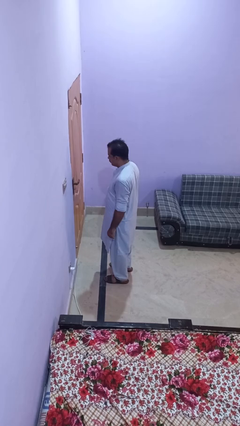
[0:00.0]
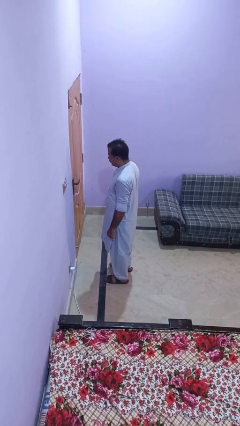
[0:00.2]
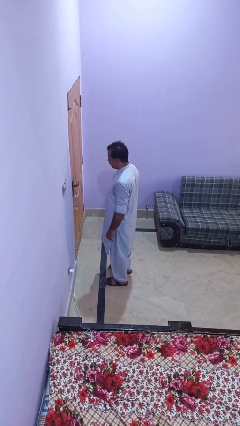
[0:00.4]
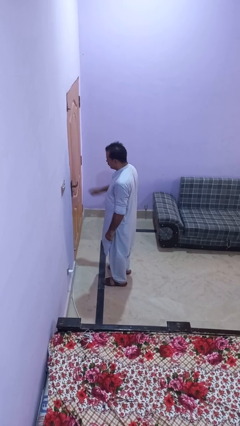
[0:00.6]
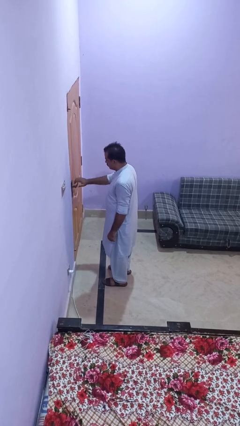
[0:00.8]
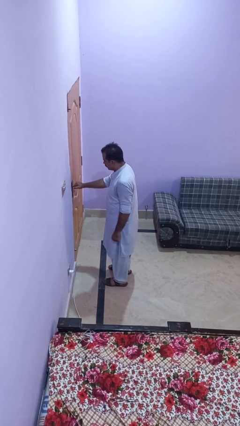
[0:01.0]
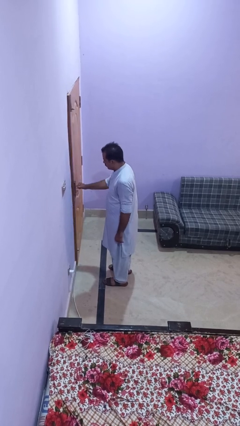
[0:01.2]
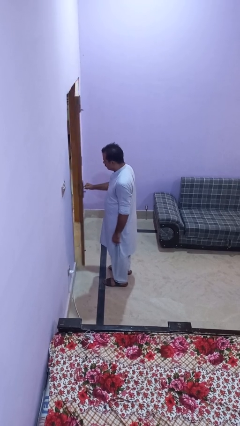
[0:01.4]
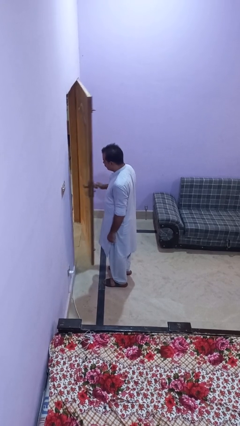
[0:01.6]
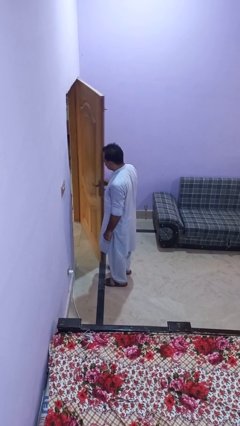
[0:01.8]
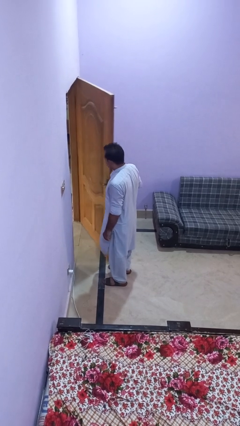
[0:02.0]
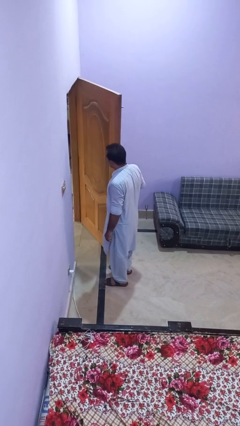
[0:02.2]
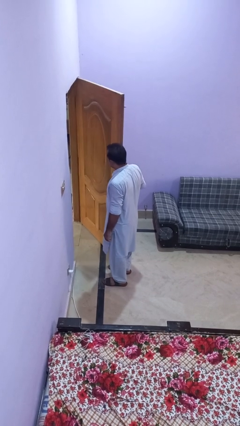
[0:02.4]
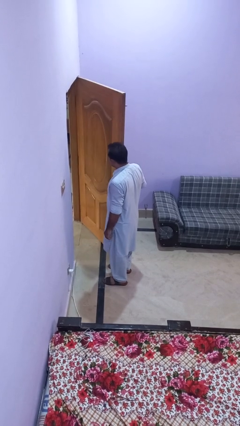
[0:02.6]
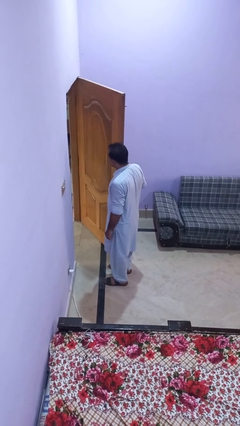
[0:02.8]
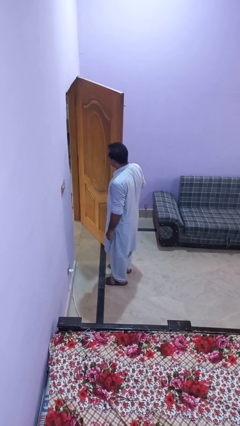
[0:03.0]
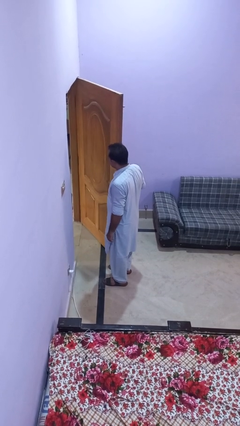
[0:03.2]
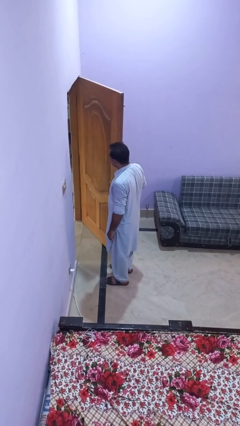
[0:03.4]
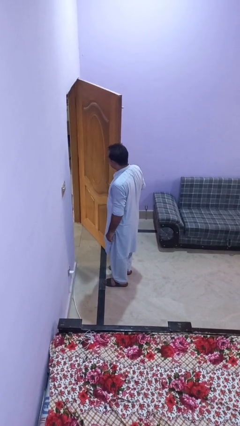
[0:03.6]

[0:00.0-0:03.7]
person opens facility door

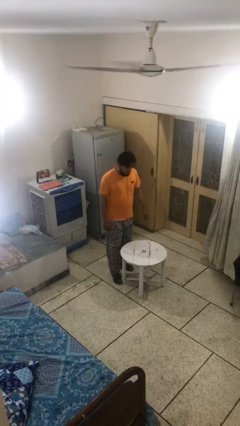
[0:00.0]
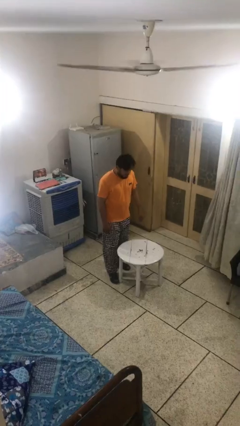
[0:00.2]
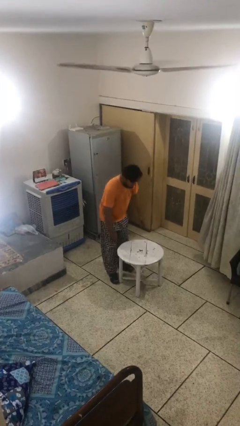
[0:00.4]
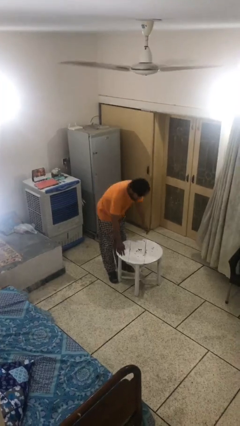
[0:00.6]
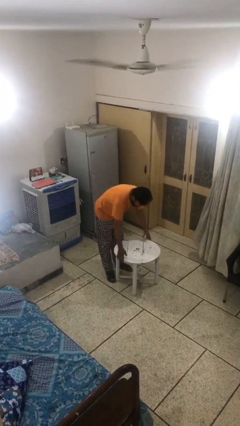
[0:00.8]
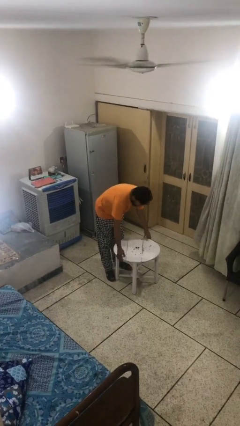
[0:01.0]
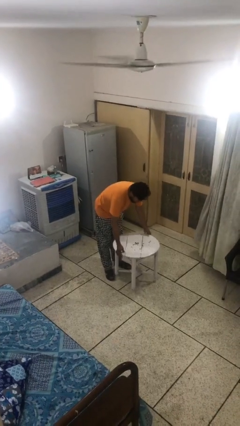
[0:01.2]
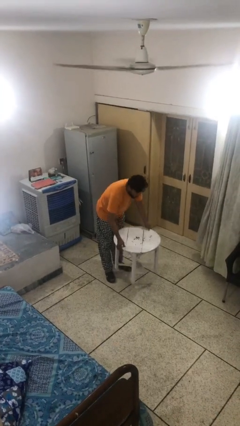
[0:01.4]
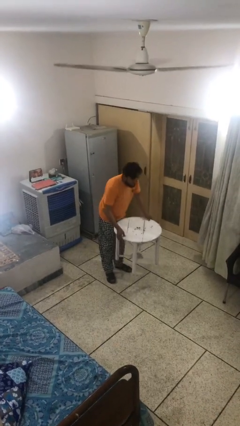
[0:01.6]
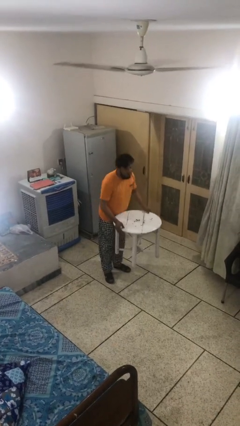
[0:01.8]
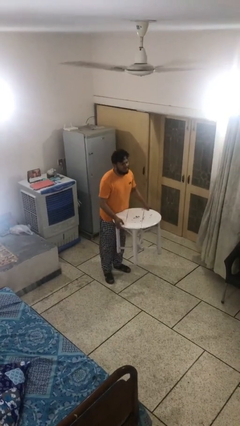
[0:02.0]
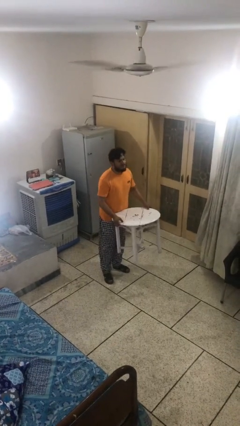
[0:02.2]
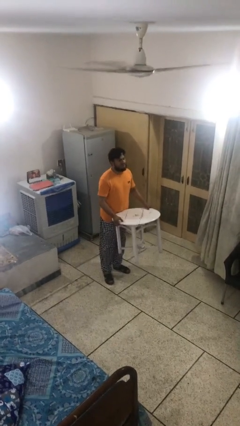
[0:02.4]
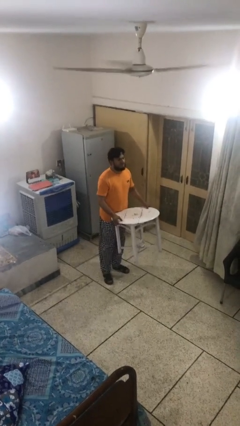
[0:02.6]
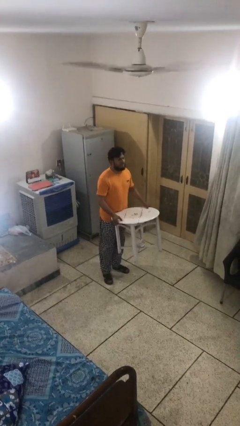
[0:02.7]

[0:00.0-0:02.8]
person picks up object from floor

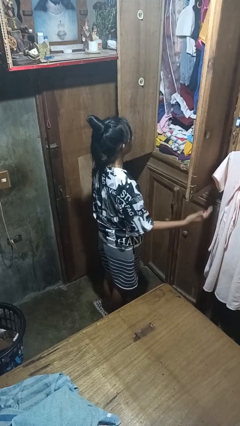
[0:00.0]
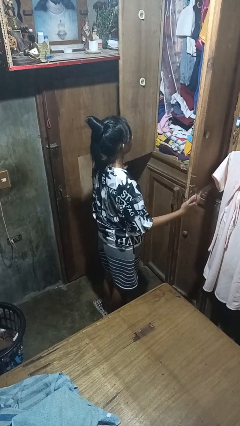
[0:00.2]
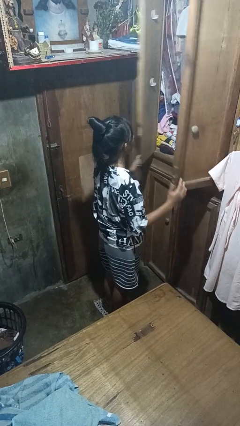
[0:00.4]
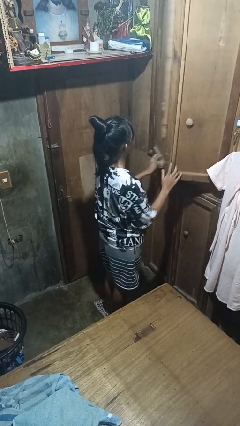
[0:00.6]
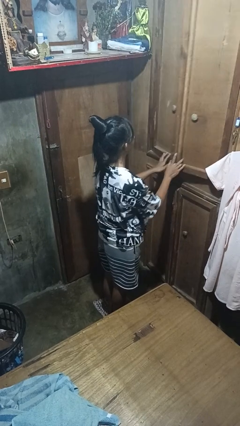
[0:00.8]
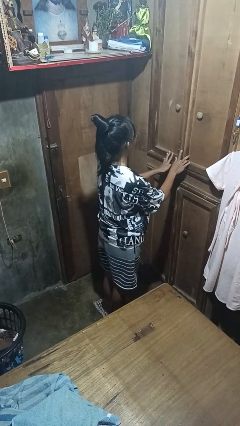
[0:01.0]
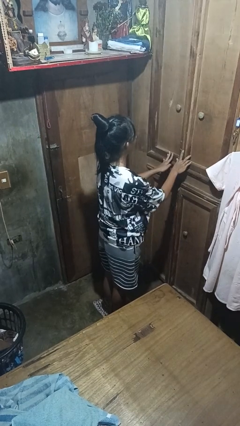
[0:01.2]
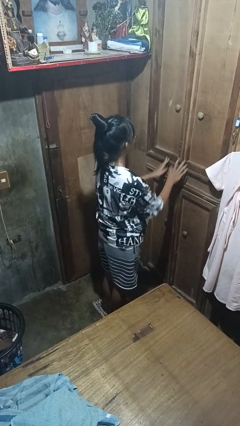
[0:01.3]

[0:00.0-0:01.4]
person closes closet door

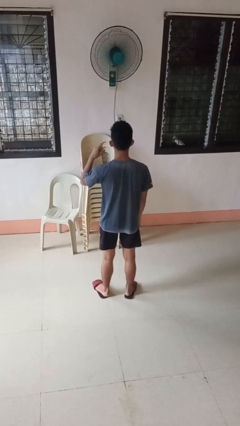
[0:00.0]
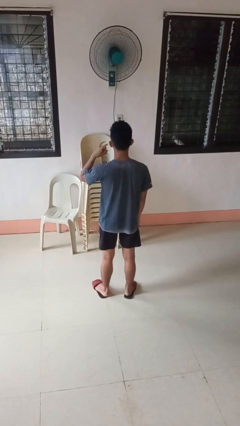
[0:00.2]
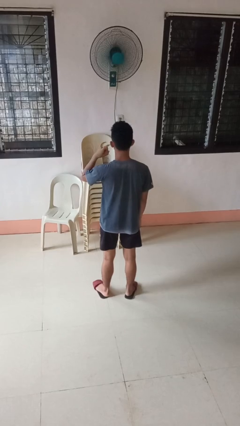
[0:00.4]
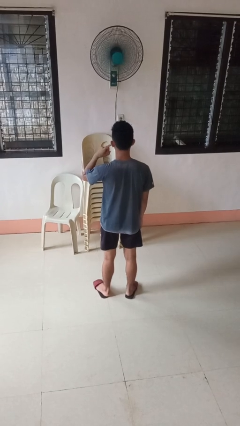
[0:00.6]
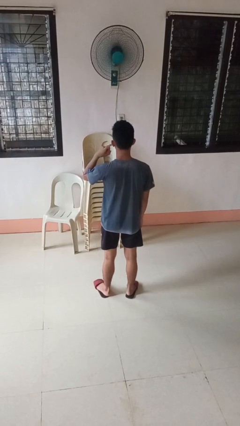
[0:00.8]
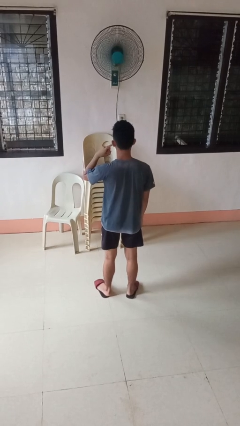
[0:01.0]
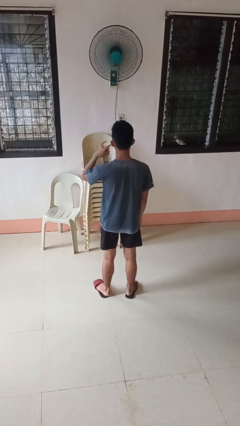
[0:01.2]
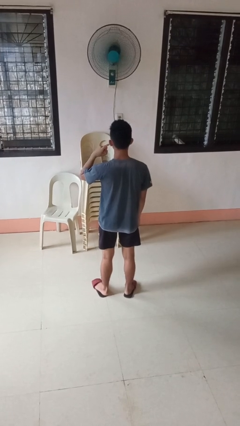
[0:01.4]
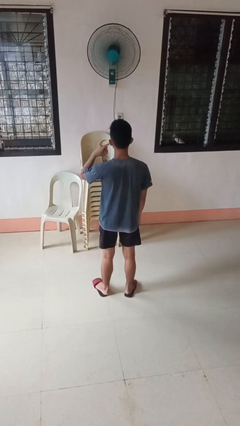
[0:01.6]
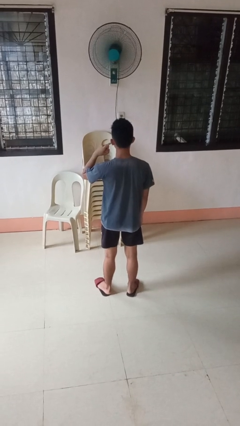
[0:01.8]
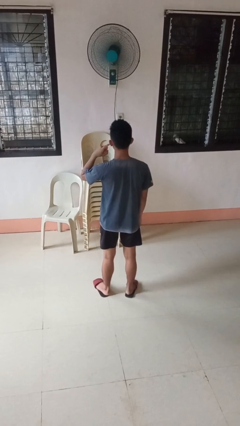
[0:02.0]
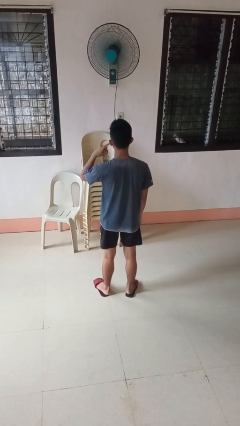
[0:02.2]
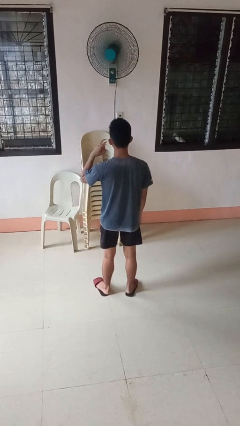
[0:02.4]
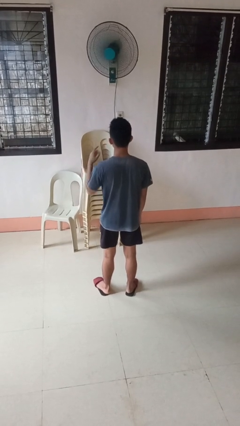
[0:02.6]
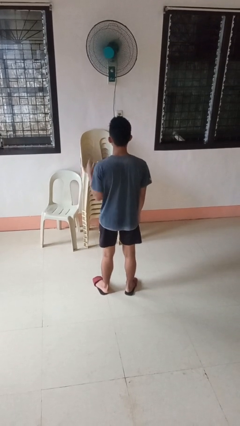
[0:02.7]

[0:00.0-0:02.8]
person gestures listen closely

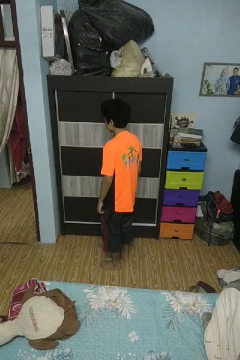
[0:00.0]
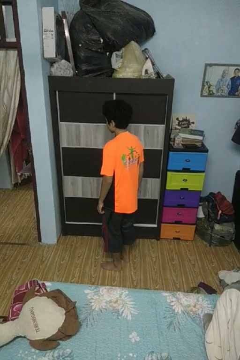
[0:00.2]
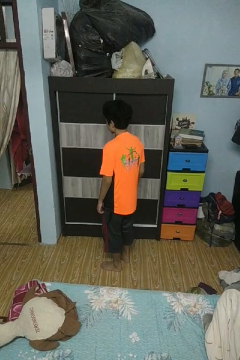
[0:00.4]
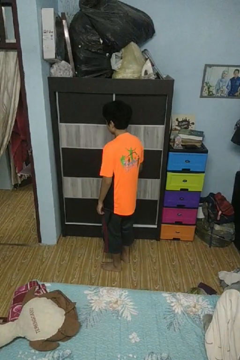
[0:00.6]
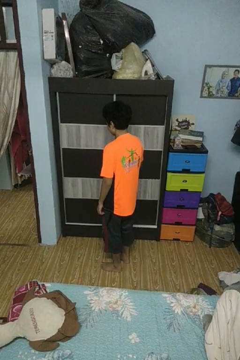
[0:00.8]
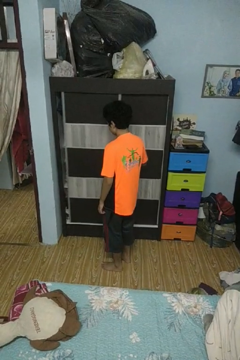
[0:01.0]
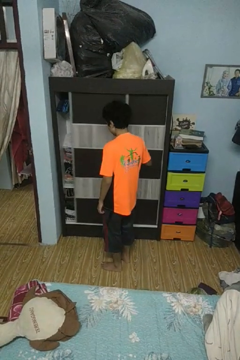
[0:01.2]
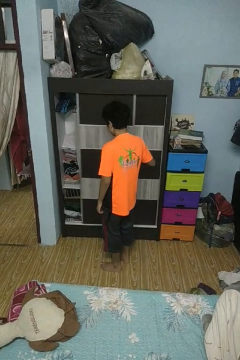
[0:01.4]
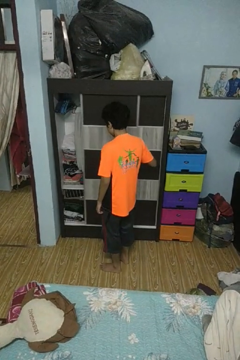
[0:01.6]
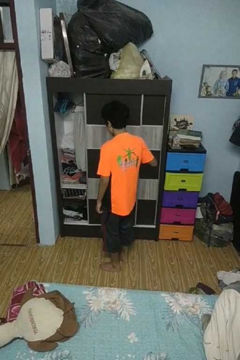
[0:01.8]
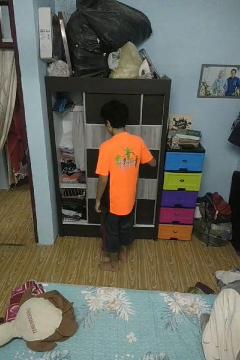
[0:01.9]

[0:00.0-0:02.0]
person opens closet door

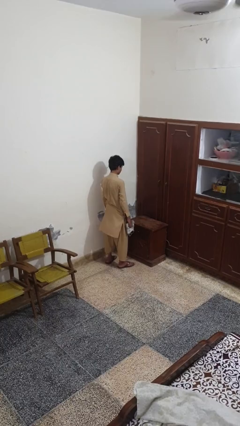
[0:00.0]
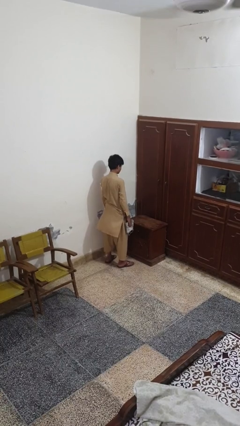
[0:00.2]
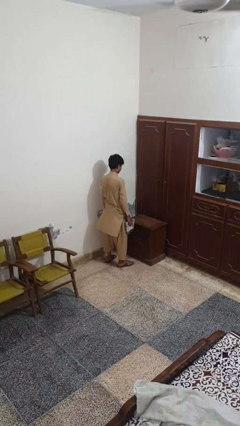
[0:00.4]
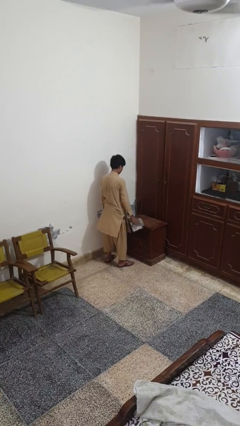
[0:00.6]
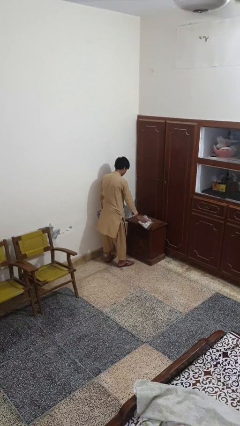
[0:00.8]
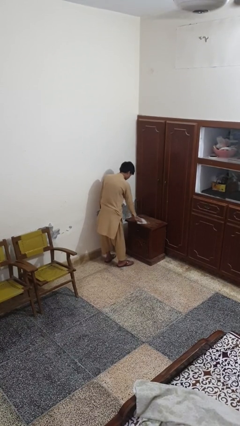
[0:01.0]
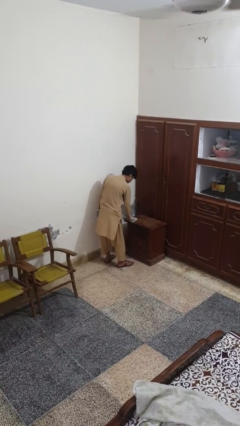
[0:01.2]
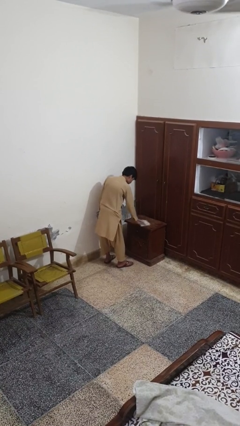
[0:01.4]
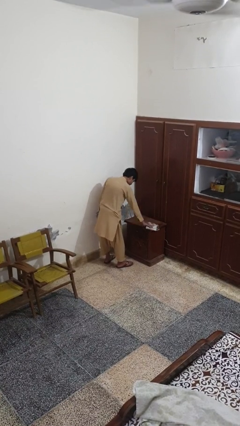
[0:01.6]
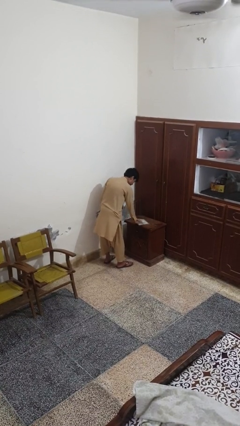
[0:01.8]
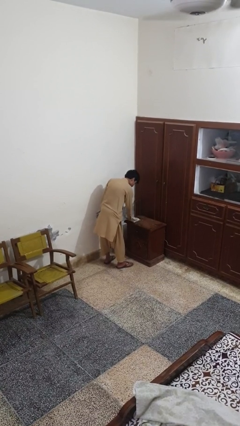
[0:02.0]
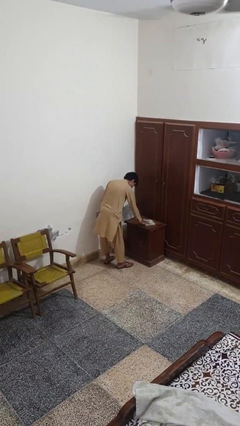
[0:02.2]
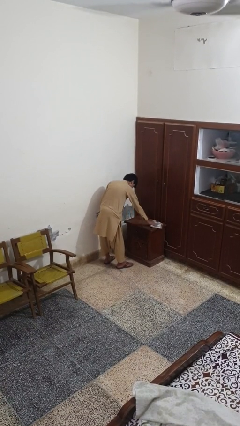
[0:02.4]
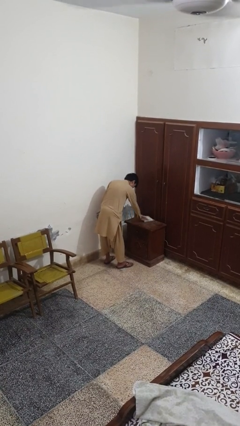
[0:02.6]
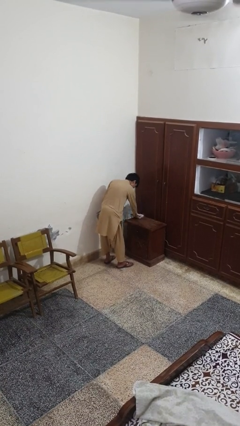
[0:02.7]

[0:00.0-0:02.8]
person cleans table with rag

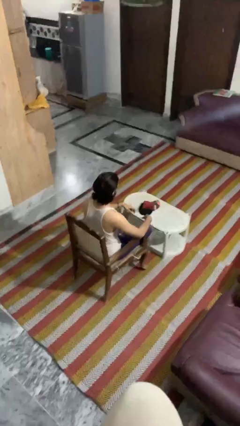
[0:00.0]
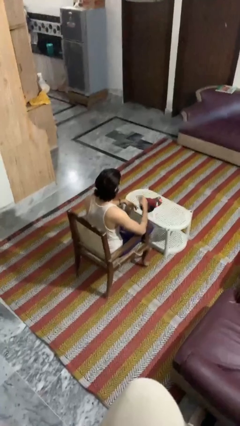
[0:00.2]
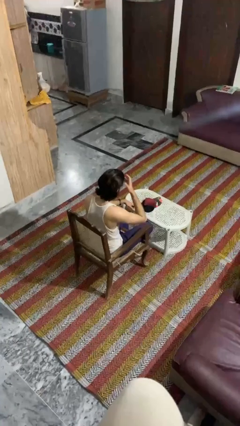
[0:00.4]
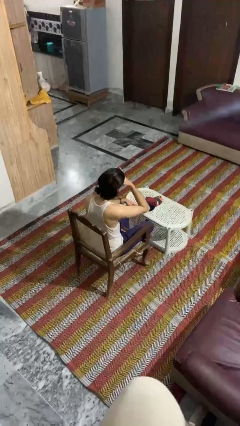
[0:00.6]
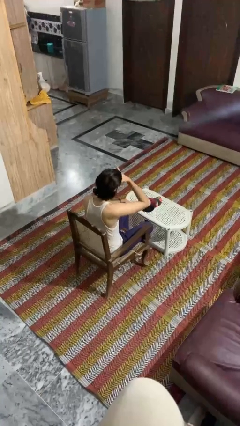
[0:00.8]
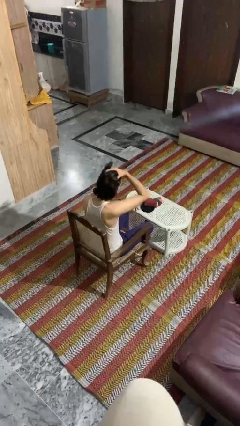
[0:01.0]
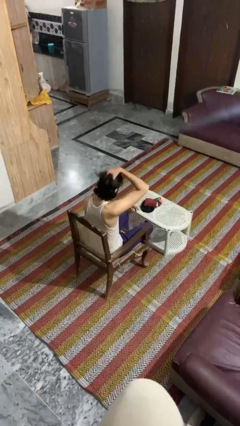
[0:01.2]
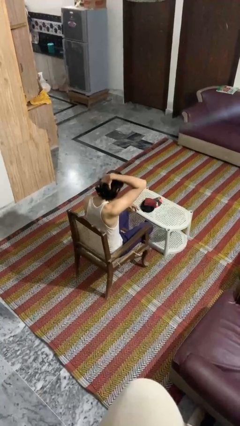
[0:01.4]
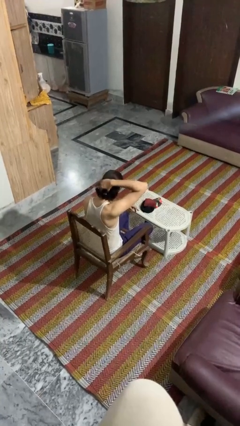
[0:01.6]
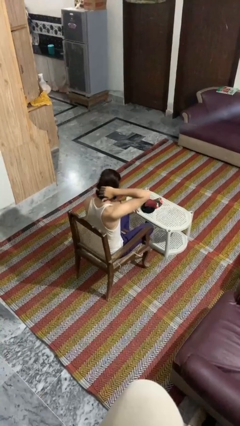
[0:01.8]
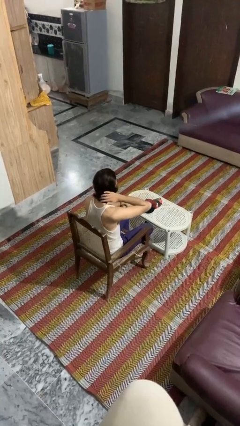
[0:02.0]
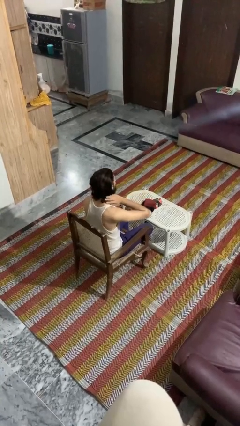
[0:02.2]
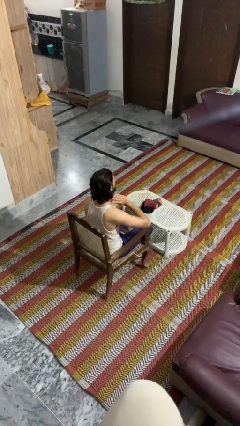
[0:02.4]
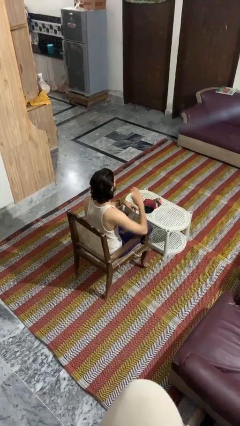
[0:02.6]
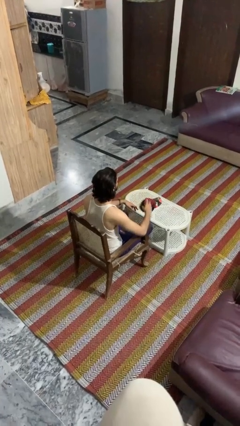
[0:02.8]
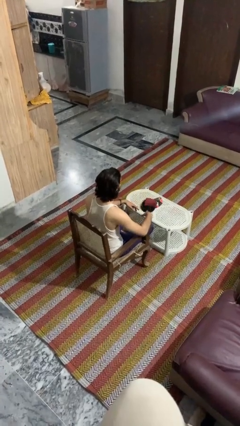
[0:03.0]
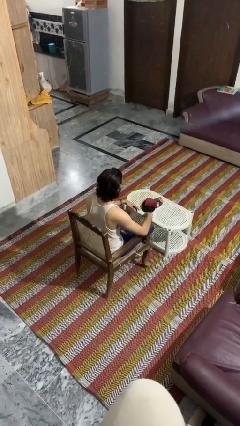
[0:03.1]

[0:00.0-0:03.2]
person strokes hair
